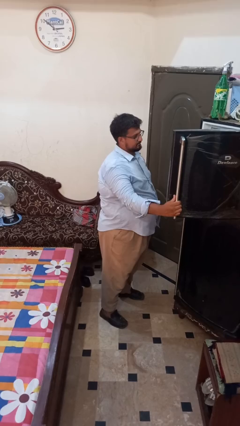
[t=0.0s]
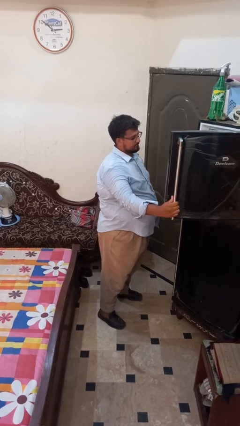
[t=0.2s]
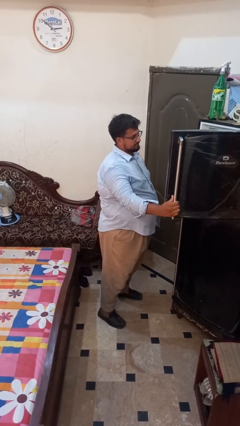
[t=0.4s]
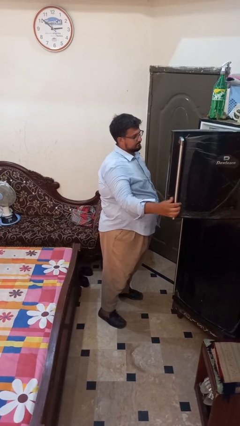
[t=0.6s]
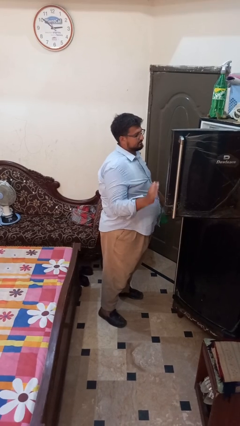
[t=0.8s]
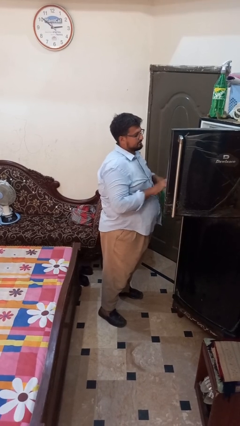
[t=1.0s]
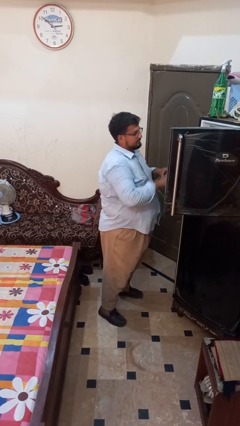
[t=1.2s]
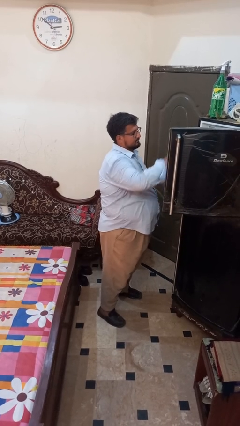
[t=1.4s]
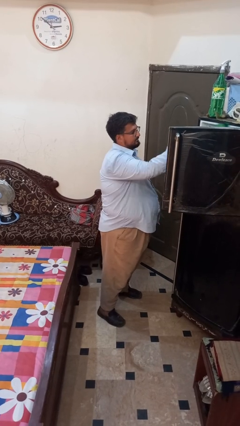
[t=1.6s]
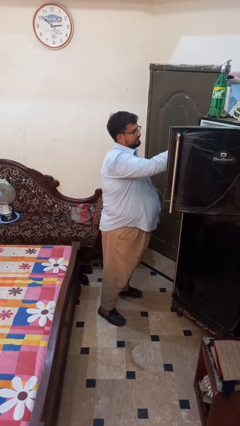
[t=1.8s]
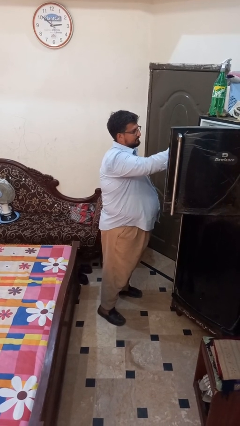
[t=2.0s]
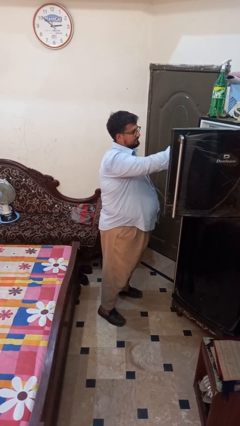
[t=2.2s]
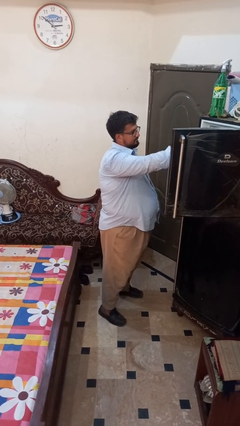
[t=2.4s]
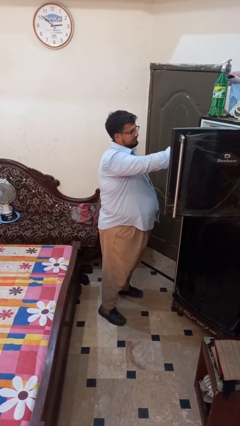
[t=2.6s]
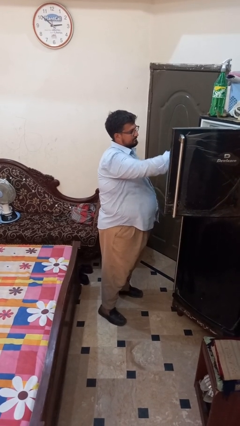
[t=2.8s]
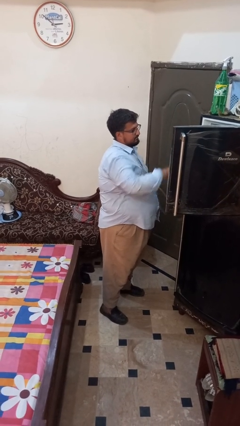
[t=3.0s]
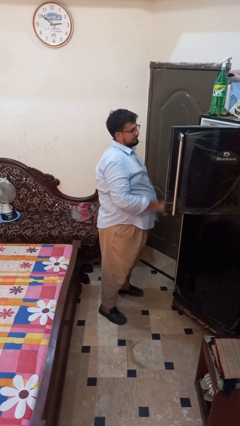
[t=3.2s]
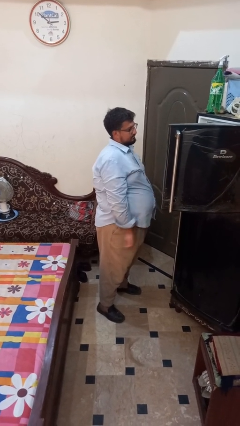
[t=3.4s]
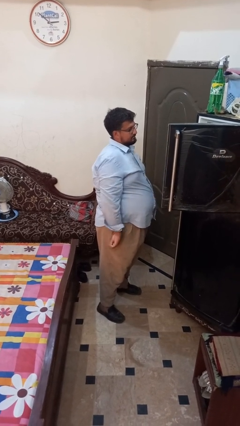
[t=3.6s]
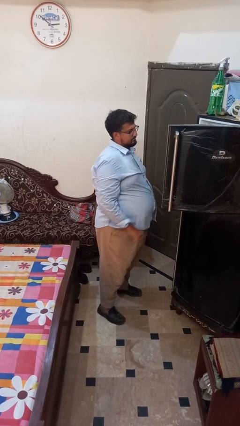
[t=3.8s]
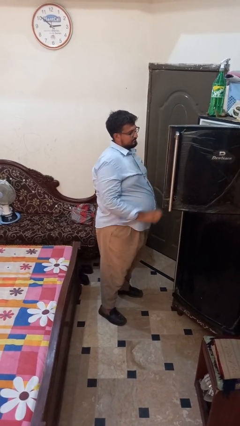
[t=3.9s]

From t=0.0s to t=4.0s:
person puts object into refrigerator

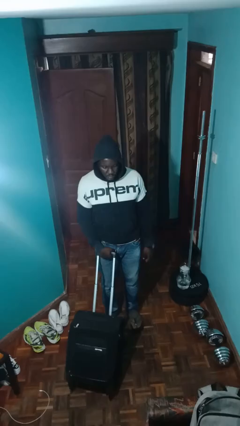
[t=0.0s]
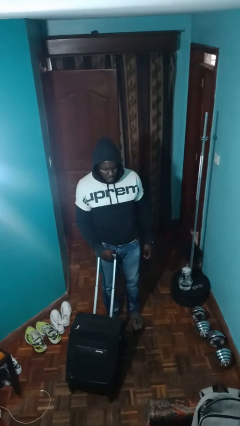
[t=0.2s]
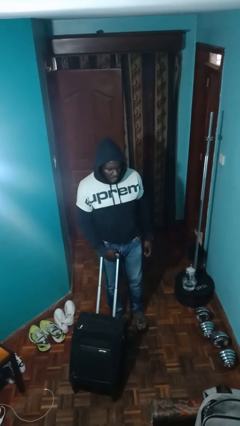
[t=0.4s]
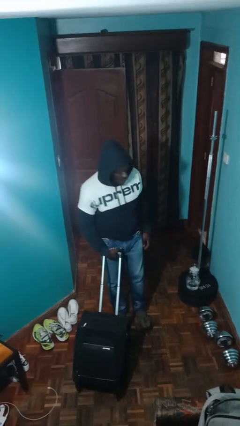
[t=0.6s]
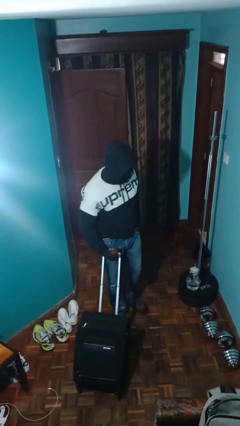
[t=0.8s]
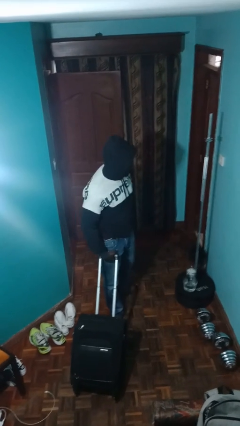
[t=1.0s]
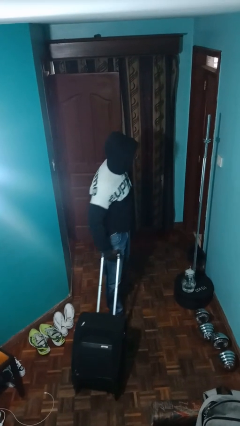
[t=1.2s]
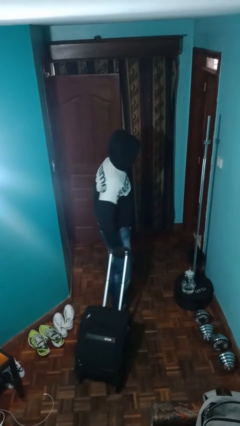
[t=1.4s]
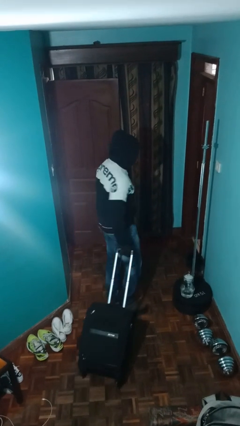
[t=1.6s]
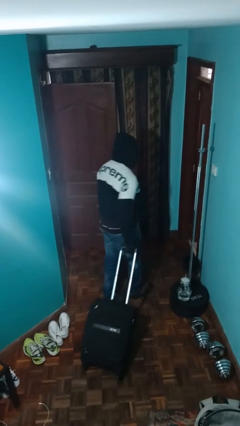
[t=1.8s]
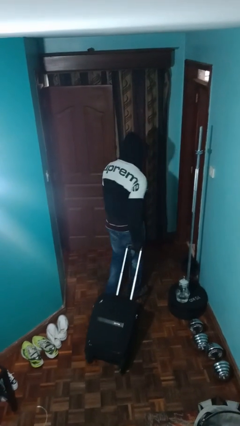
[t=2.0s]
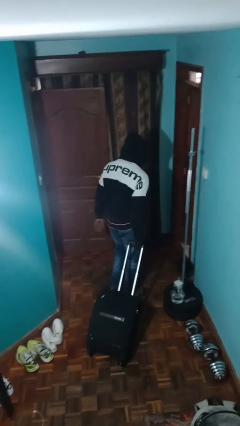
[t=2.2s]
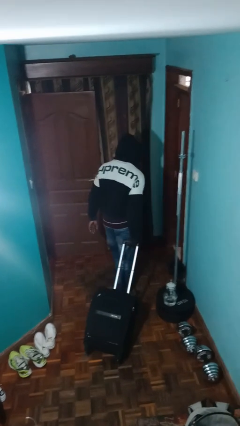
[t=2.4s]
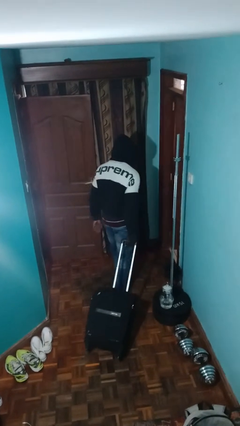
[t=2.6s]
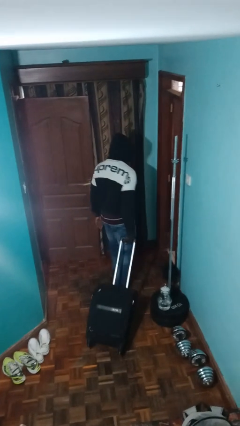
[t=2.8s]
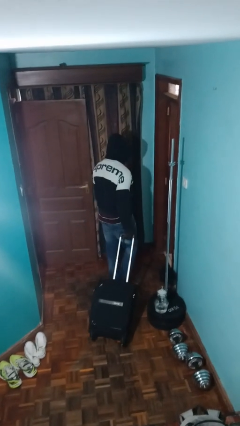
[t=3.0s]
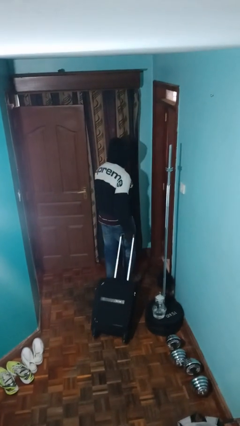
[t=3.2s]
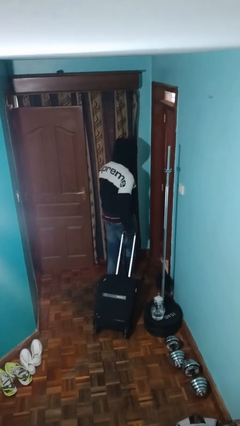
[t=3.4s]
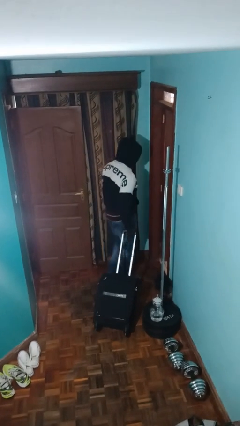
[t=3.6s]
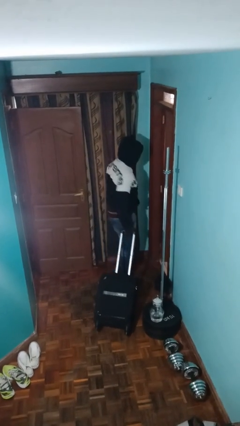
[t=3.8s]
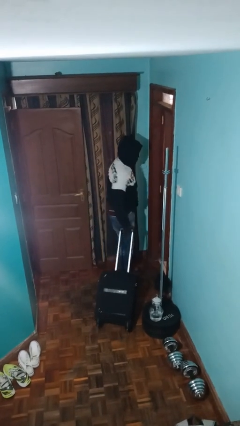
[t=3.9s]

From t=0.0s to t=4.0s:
person pulls wheeled cart

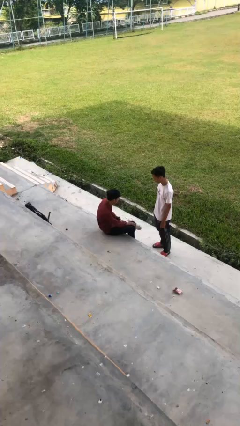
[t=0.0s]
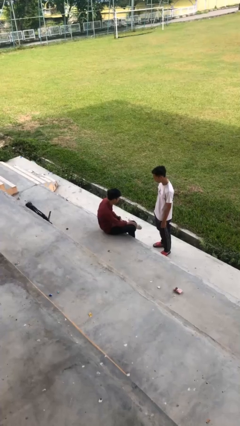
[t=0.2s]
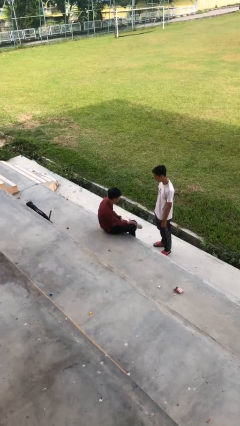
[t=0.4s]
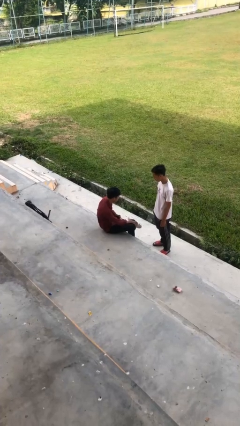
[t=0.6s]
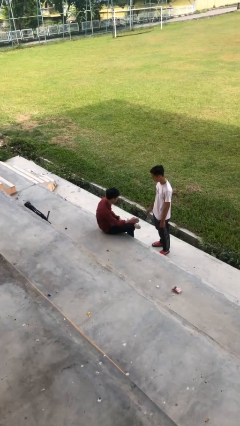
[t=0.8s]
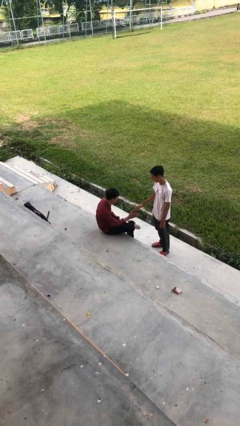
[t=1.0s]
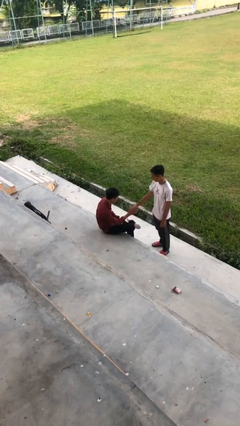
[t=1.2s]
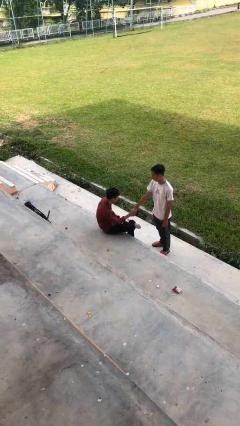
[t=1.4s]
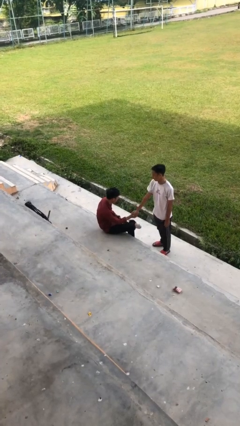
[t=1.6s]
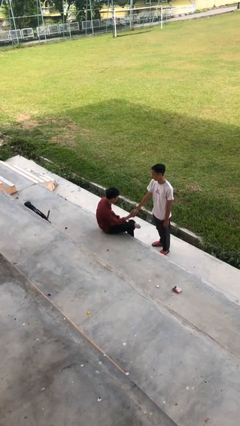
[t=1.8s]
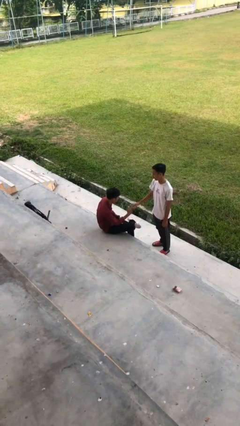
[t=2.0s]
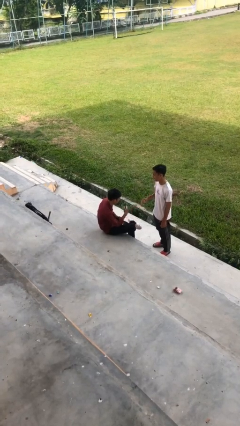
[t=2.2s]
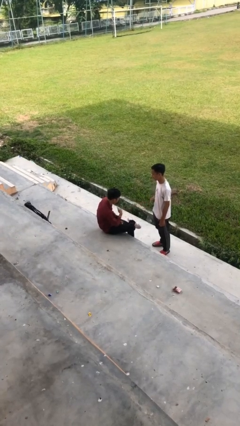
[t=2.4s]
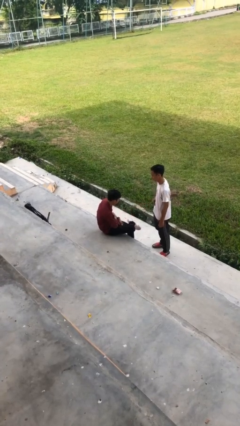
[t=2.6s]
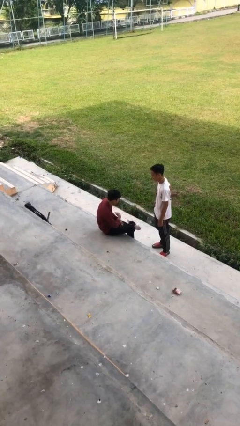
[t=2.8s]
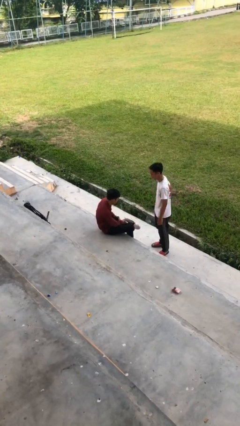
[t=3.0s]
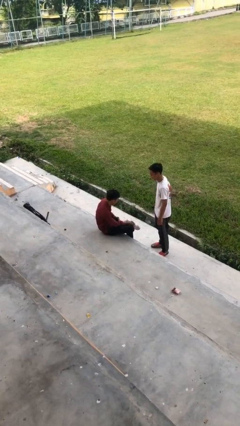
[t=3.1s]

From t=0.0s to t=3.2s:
person shakes hand

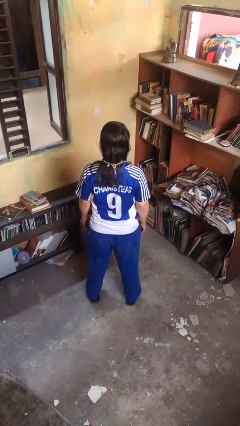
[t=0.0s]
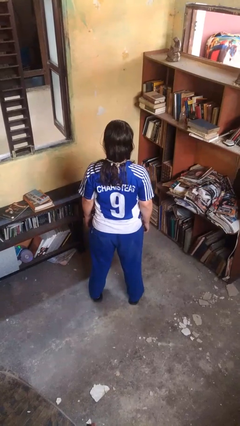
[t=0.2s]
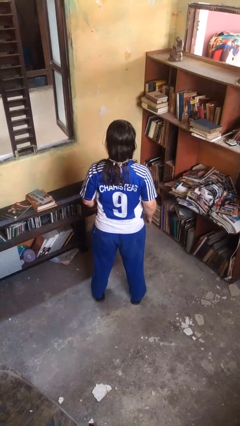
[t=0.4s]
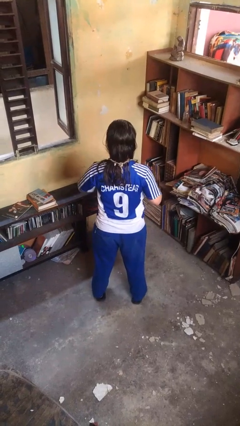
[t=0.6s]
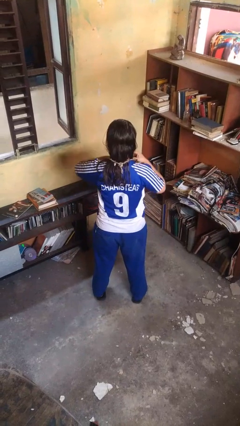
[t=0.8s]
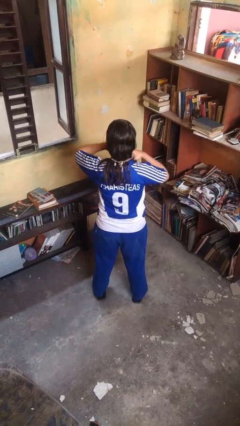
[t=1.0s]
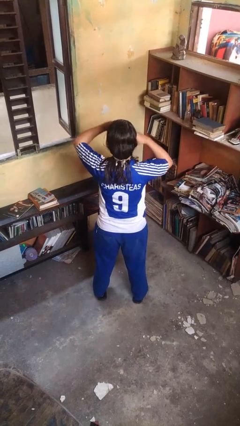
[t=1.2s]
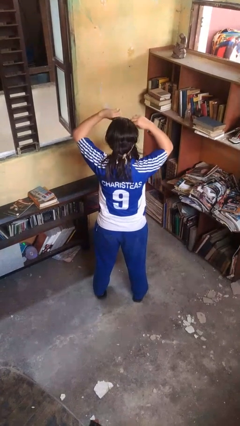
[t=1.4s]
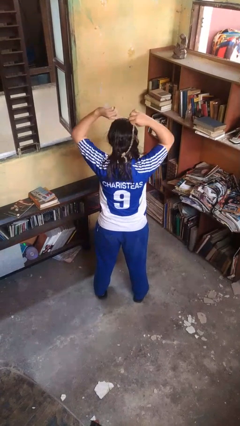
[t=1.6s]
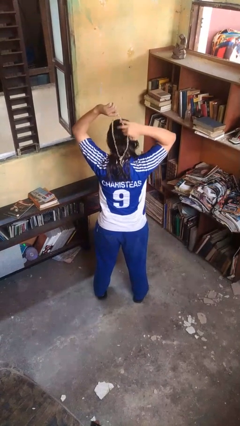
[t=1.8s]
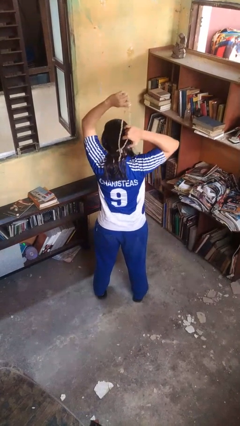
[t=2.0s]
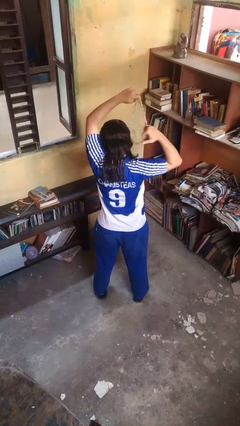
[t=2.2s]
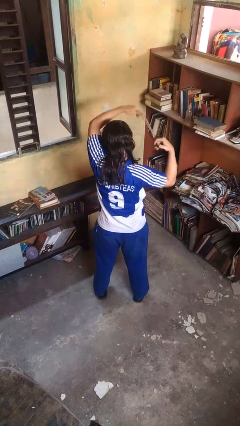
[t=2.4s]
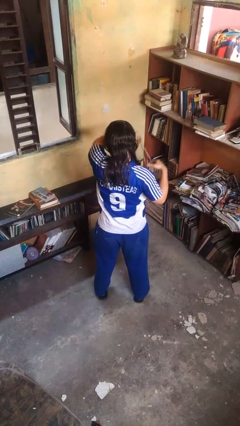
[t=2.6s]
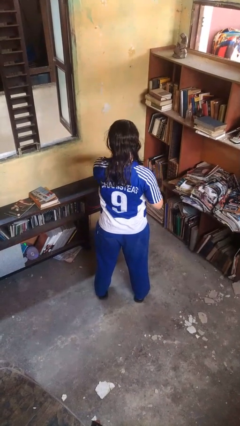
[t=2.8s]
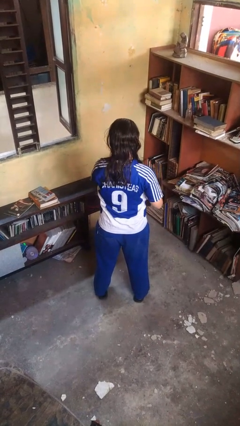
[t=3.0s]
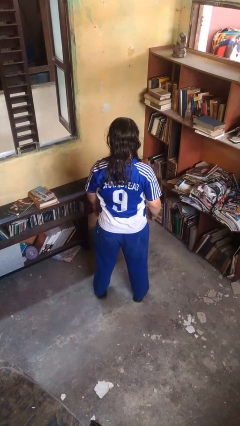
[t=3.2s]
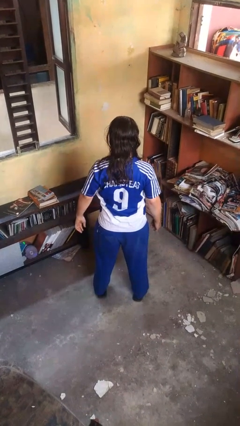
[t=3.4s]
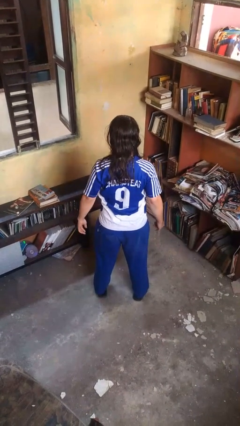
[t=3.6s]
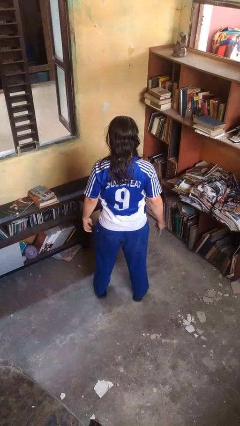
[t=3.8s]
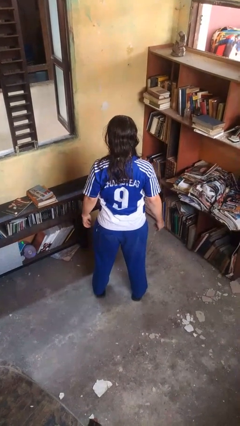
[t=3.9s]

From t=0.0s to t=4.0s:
person takes off necklace

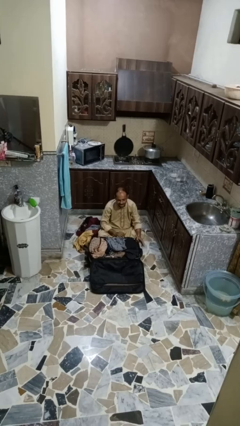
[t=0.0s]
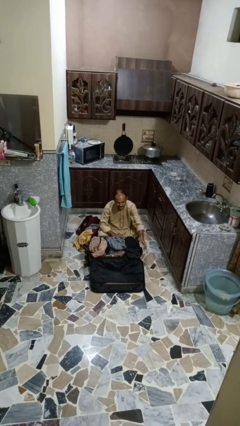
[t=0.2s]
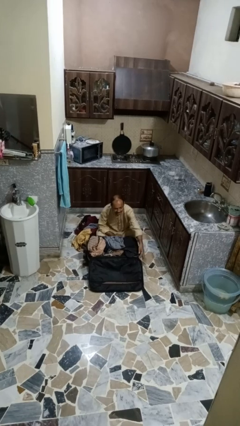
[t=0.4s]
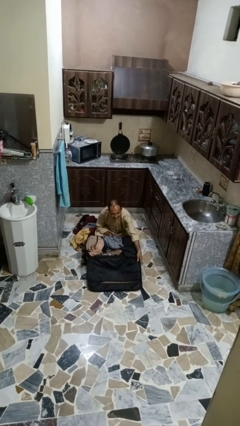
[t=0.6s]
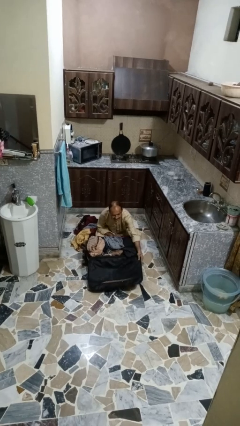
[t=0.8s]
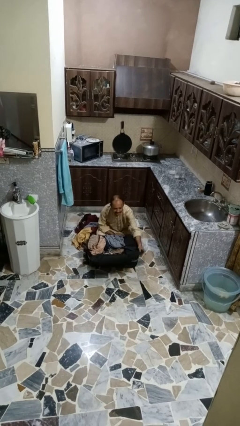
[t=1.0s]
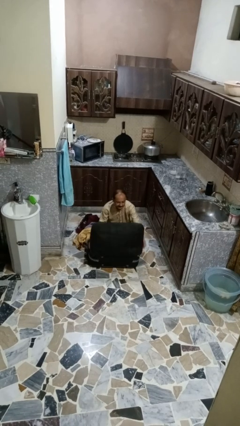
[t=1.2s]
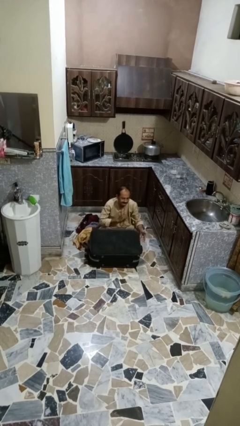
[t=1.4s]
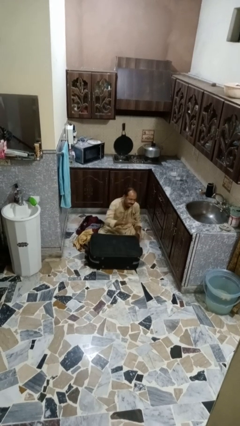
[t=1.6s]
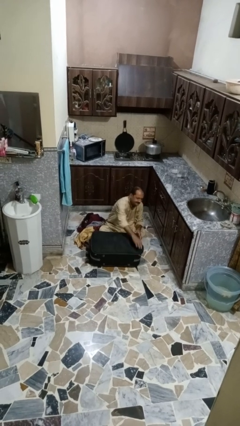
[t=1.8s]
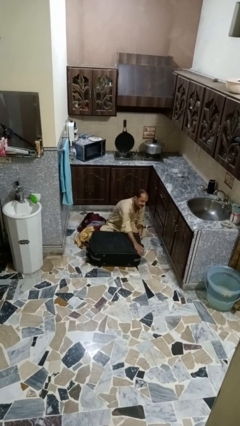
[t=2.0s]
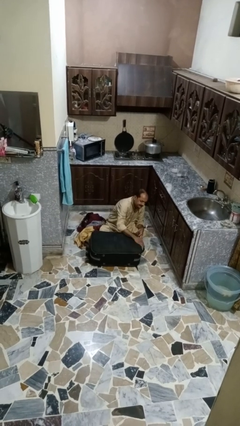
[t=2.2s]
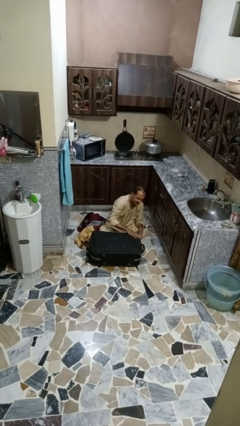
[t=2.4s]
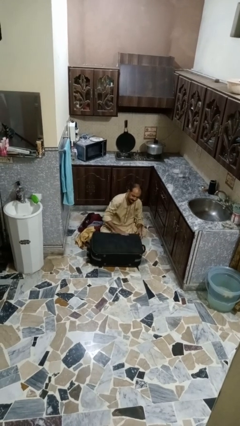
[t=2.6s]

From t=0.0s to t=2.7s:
person closes suitcase
